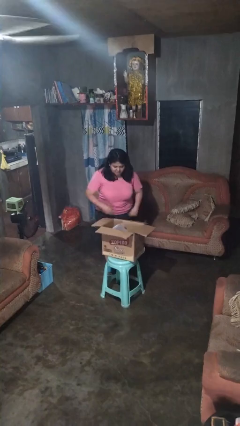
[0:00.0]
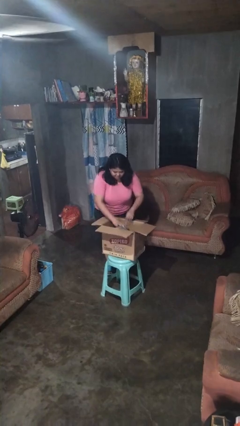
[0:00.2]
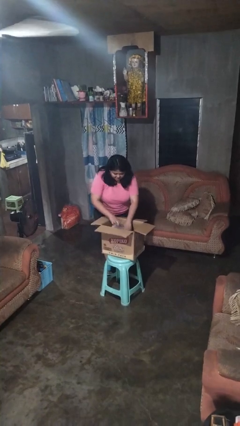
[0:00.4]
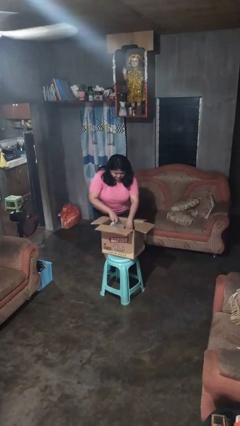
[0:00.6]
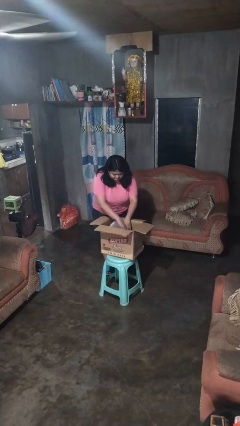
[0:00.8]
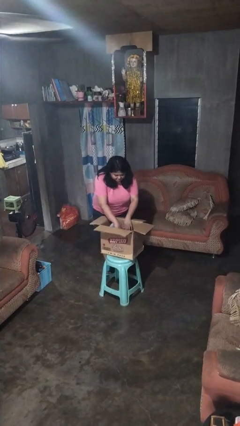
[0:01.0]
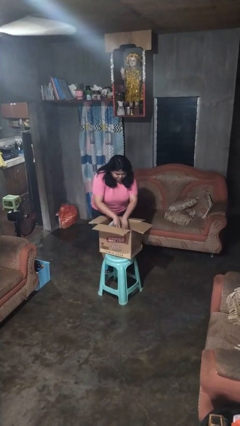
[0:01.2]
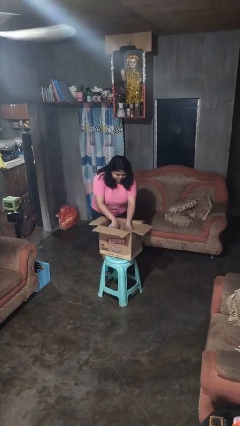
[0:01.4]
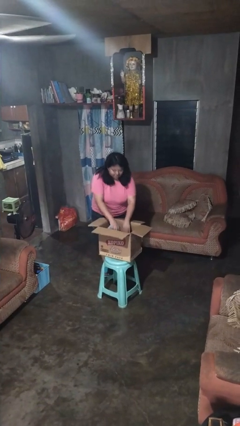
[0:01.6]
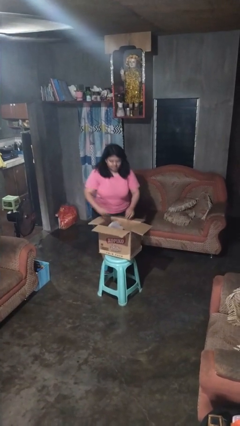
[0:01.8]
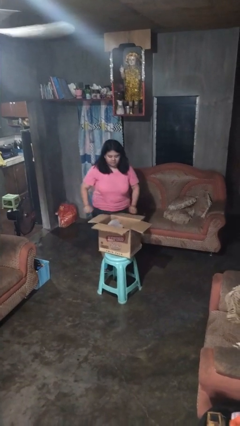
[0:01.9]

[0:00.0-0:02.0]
person searches in box

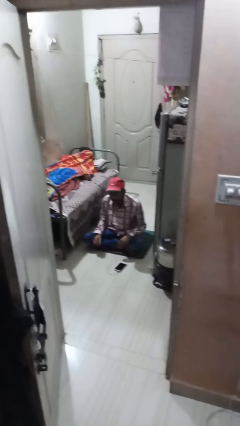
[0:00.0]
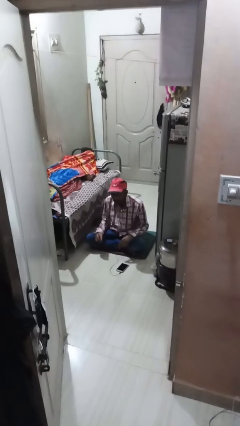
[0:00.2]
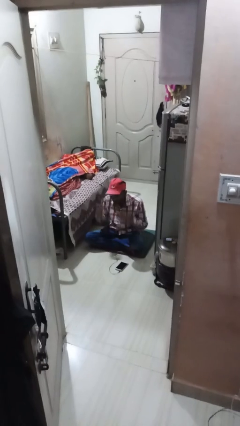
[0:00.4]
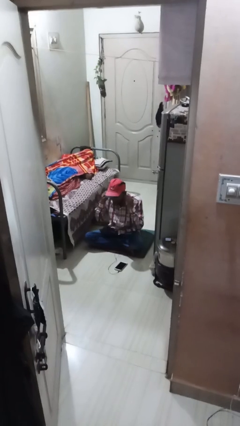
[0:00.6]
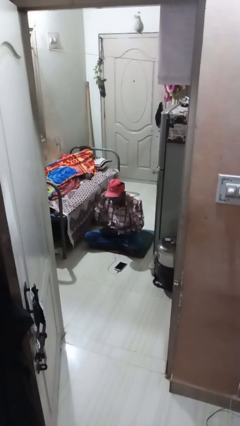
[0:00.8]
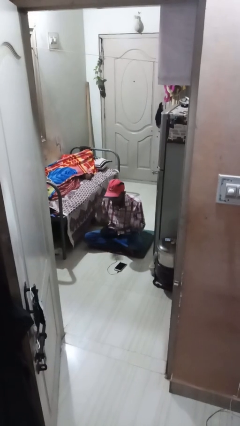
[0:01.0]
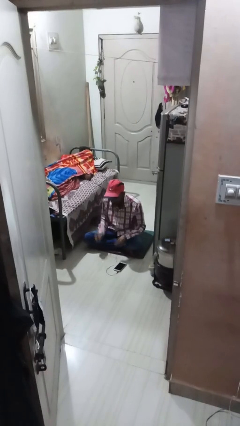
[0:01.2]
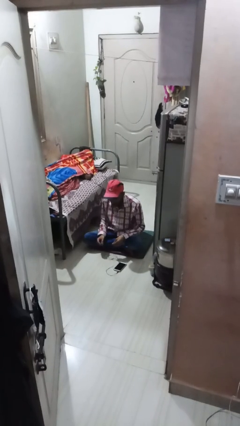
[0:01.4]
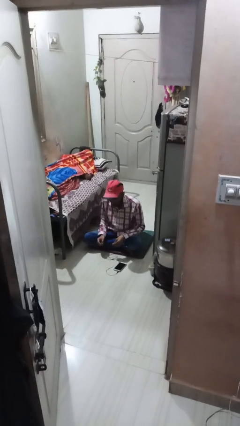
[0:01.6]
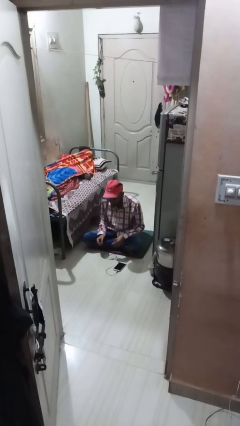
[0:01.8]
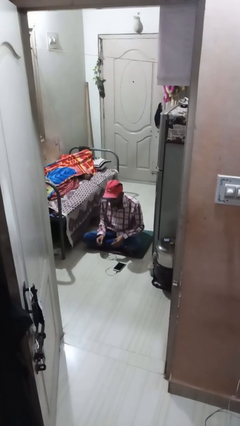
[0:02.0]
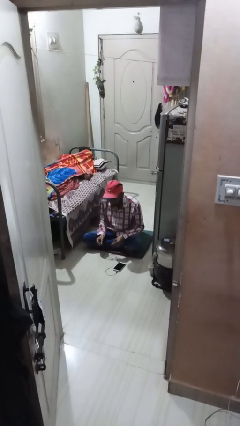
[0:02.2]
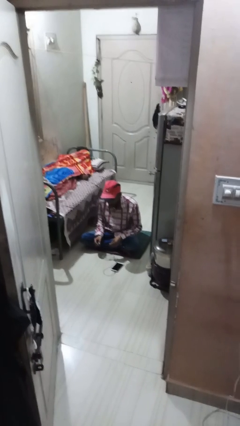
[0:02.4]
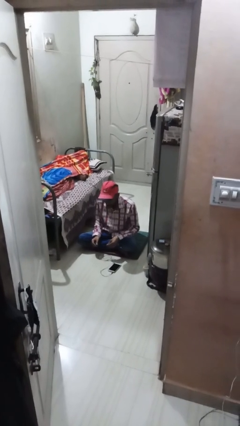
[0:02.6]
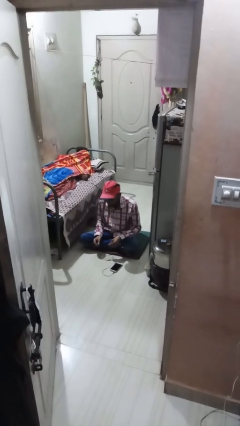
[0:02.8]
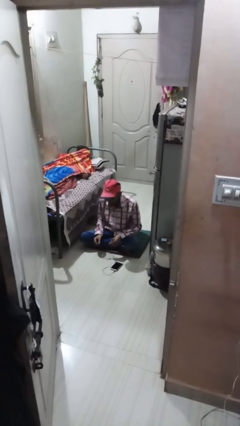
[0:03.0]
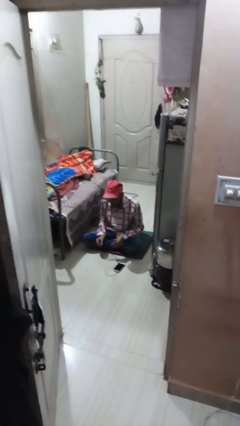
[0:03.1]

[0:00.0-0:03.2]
person takes off headphones

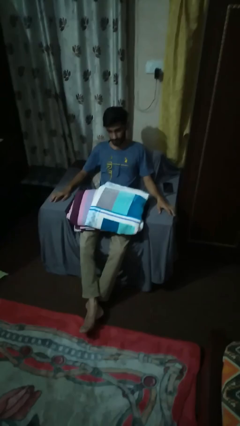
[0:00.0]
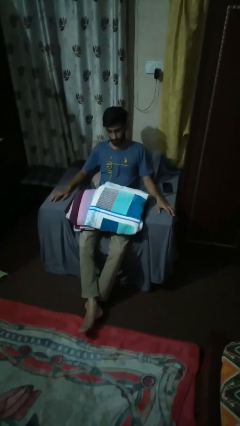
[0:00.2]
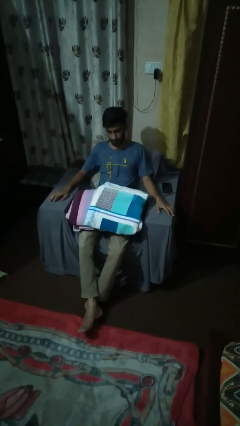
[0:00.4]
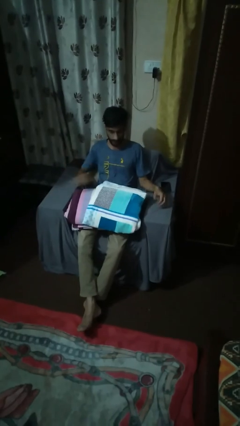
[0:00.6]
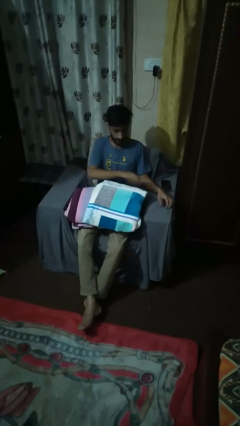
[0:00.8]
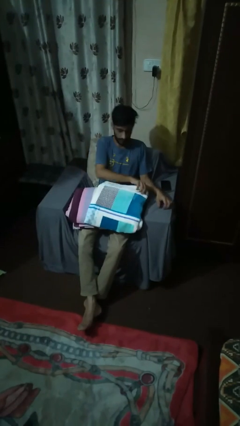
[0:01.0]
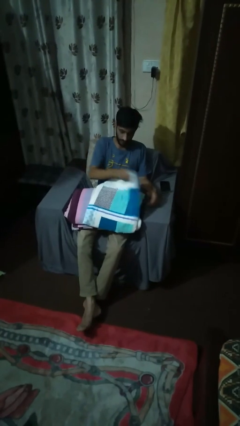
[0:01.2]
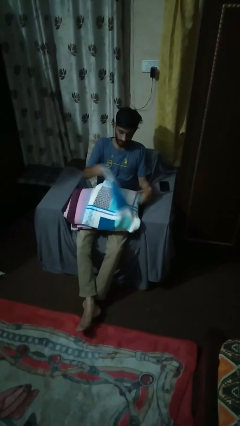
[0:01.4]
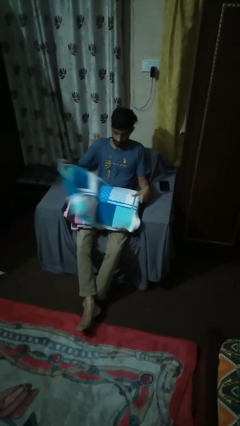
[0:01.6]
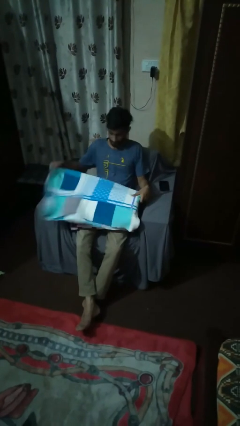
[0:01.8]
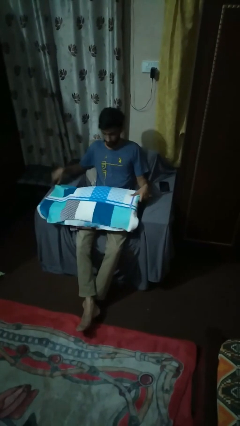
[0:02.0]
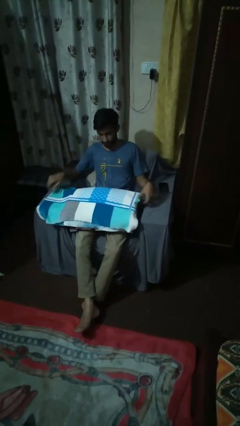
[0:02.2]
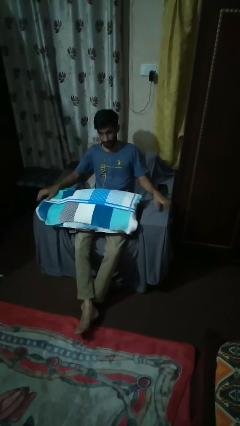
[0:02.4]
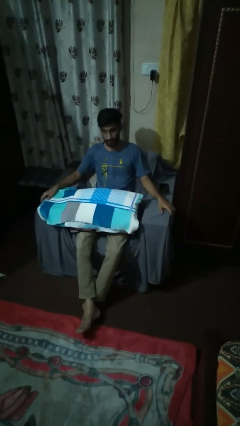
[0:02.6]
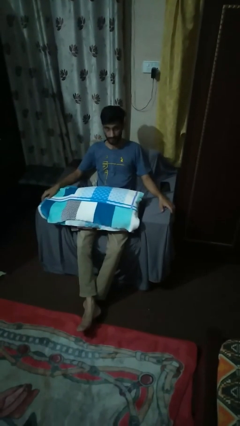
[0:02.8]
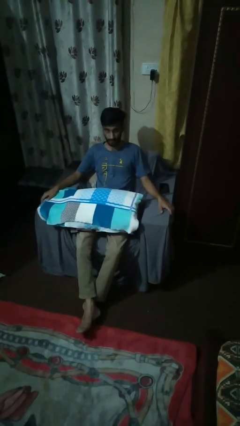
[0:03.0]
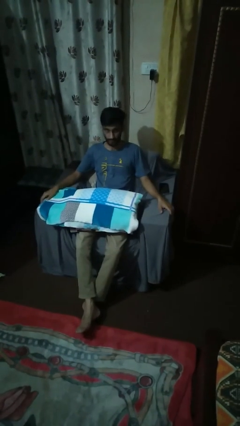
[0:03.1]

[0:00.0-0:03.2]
person unfolds blanket

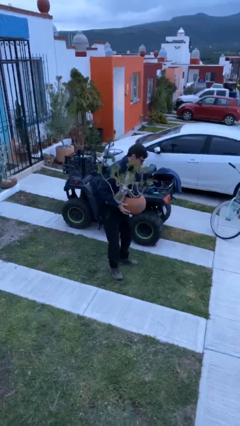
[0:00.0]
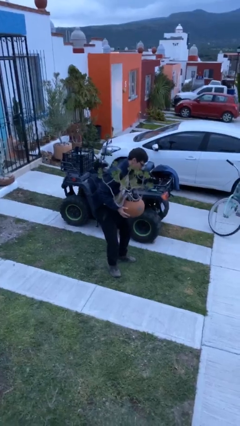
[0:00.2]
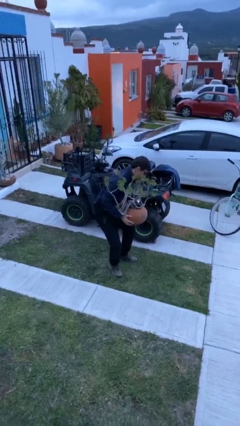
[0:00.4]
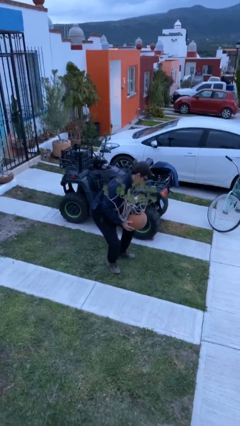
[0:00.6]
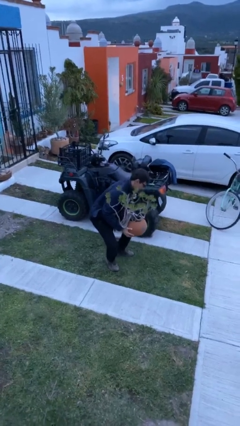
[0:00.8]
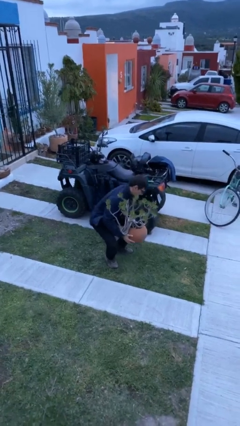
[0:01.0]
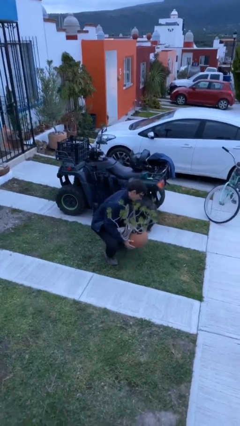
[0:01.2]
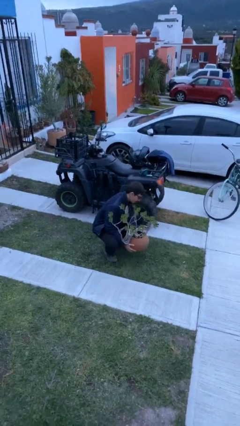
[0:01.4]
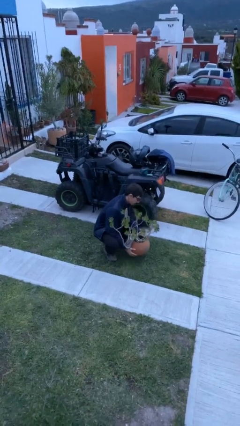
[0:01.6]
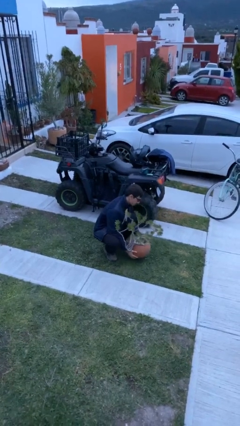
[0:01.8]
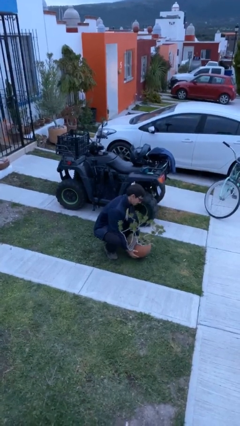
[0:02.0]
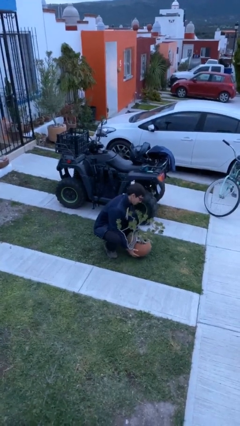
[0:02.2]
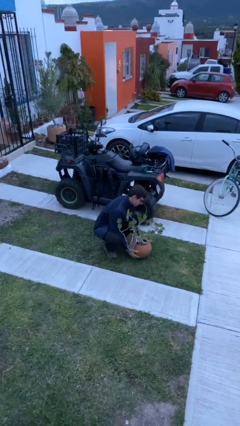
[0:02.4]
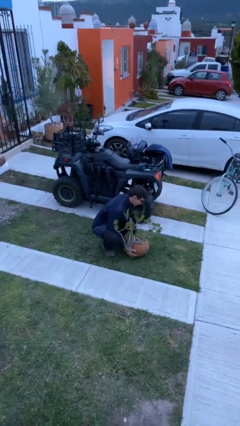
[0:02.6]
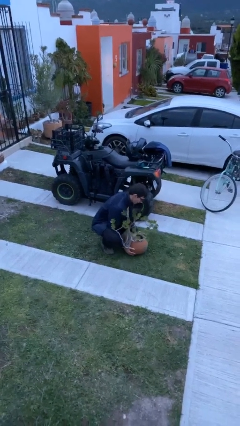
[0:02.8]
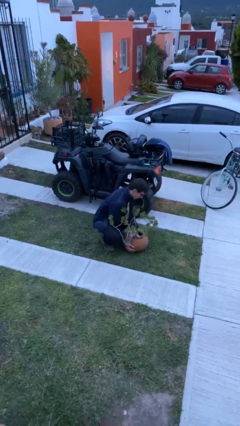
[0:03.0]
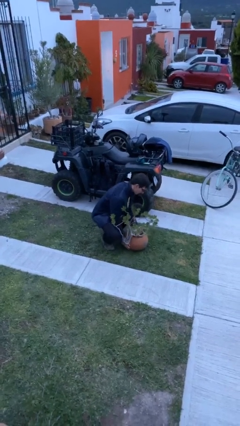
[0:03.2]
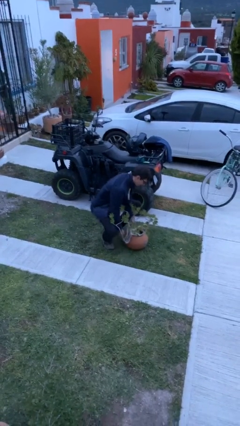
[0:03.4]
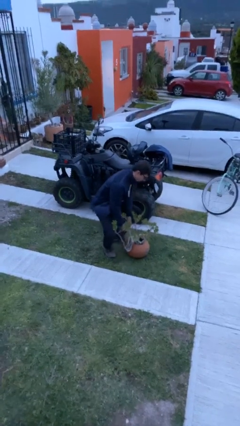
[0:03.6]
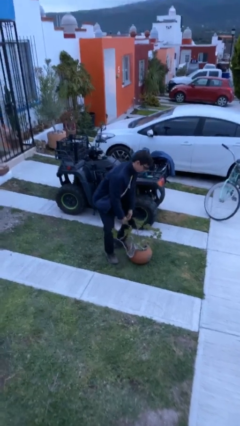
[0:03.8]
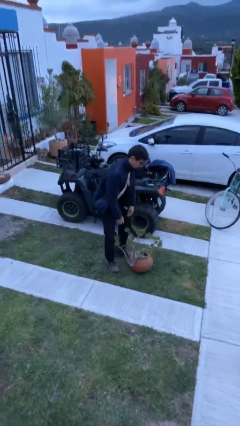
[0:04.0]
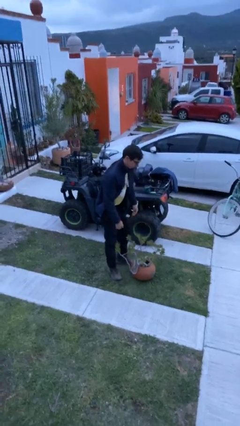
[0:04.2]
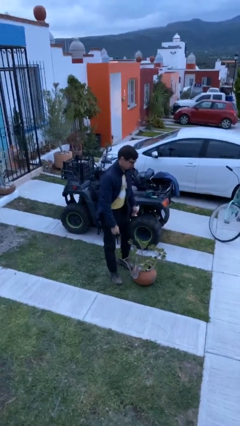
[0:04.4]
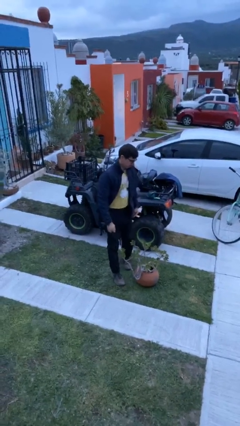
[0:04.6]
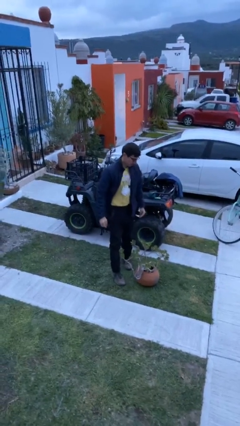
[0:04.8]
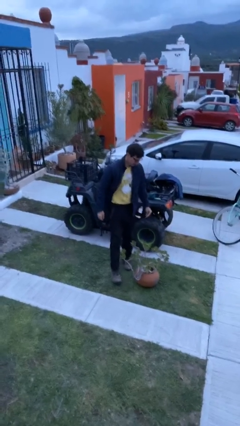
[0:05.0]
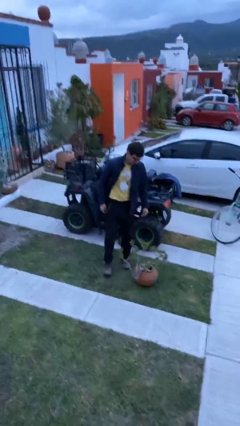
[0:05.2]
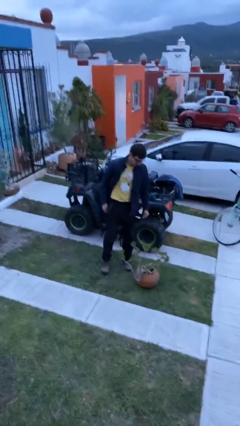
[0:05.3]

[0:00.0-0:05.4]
person puts down object on floor

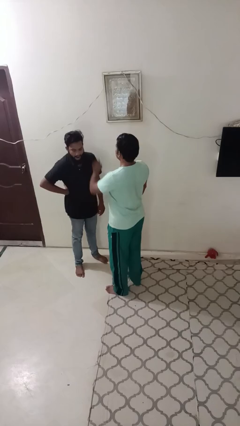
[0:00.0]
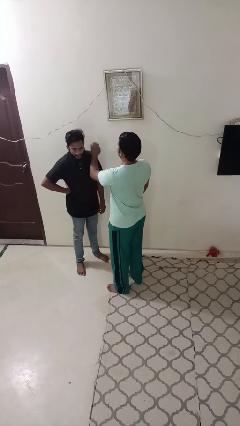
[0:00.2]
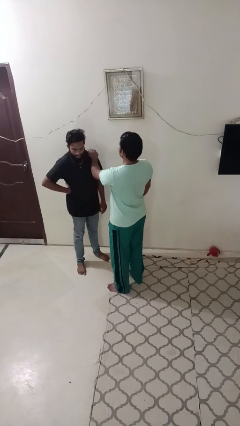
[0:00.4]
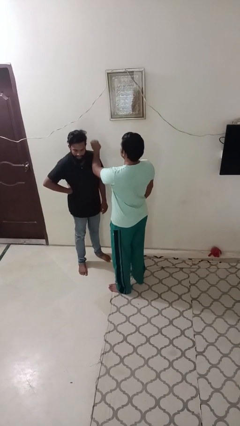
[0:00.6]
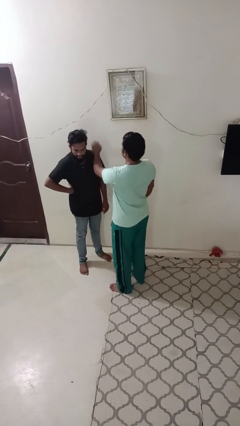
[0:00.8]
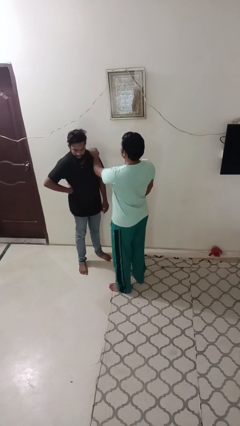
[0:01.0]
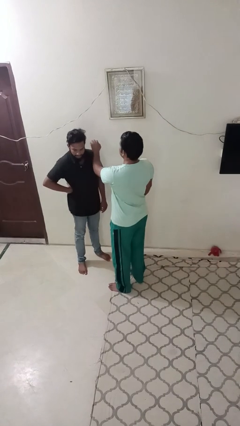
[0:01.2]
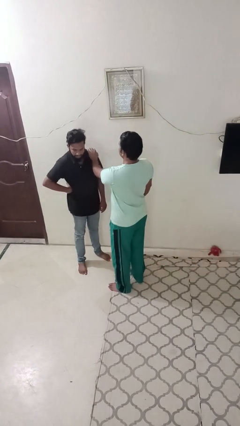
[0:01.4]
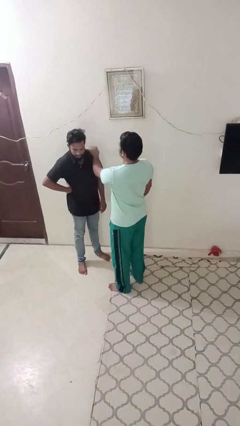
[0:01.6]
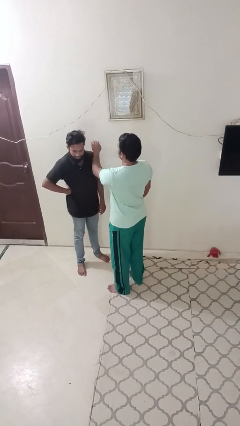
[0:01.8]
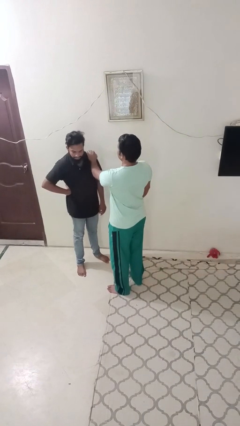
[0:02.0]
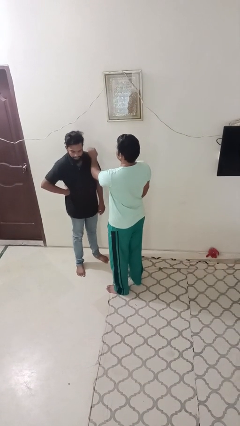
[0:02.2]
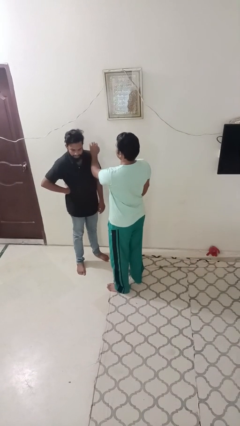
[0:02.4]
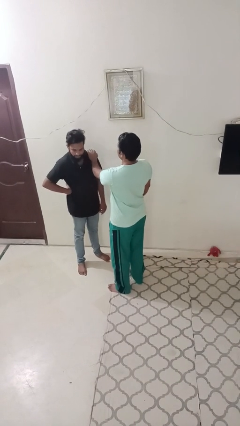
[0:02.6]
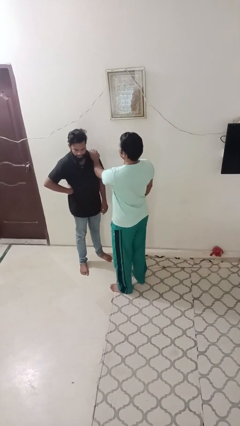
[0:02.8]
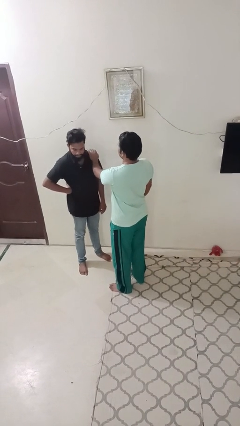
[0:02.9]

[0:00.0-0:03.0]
person pounds shoulders of person

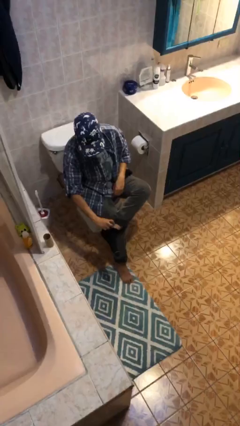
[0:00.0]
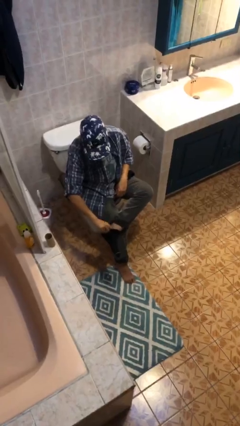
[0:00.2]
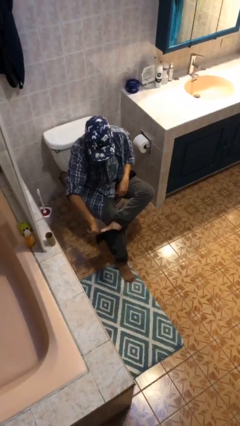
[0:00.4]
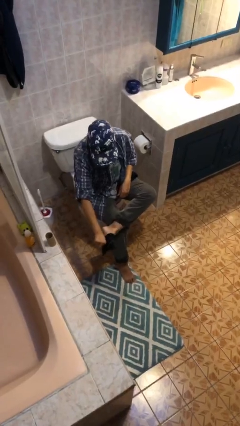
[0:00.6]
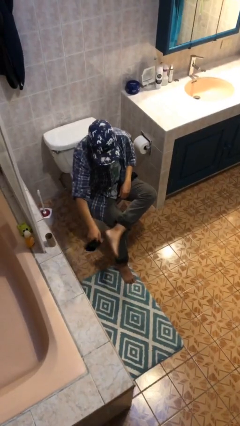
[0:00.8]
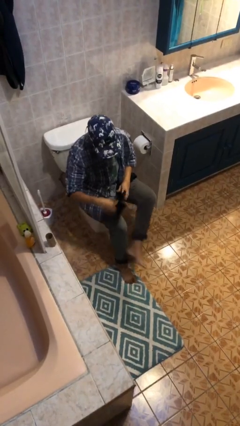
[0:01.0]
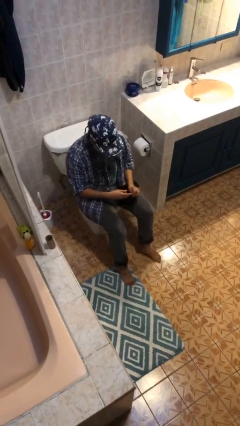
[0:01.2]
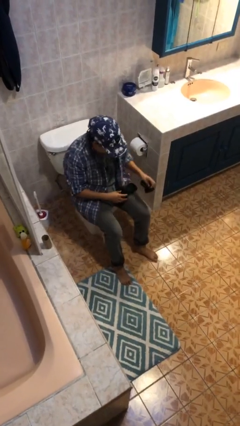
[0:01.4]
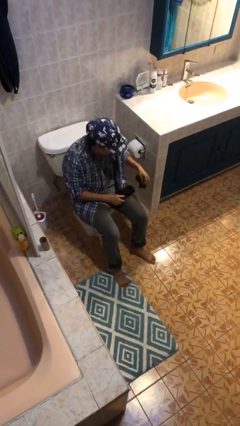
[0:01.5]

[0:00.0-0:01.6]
person takes off socks
